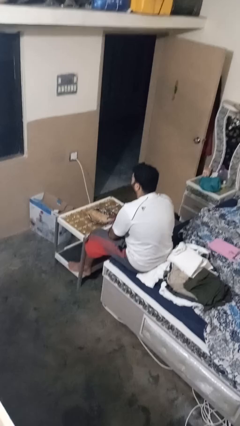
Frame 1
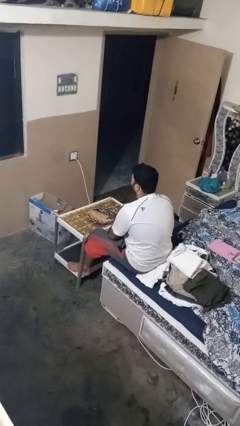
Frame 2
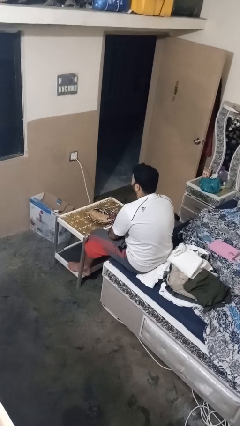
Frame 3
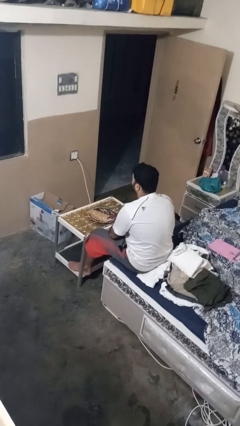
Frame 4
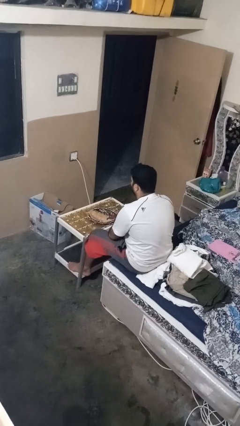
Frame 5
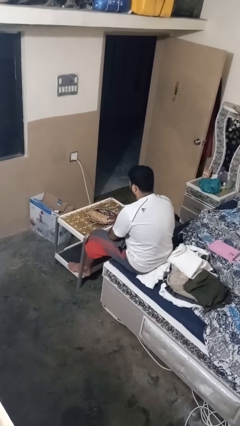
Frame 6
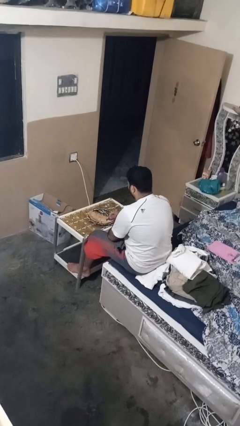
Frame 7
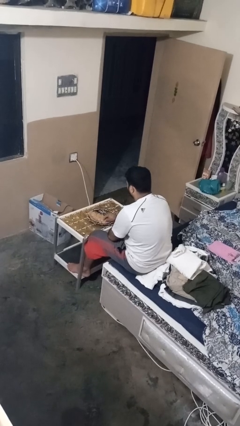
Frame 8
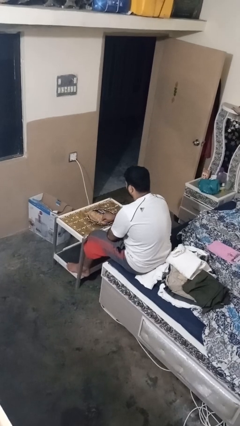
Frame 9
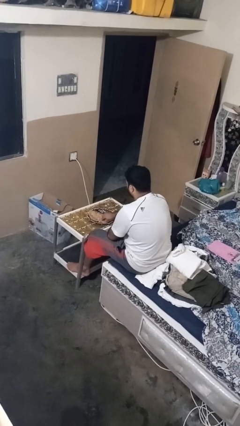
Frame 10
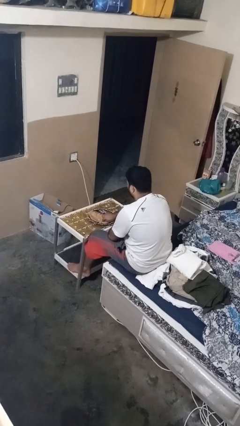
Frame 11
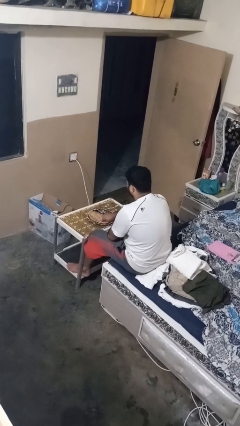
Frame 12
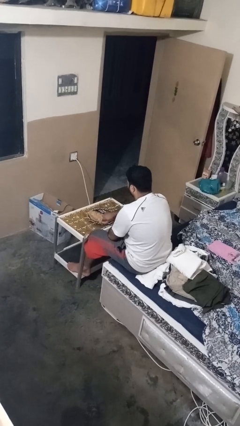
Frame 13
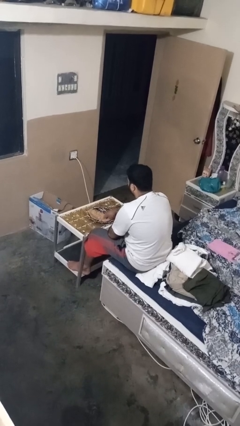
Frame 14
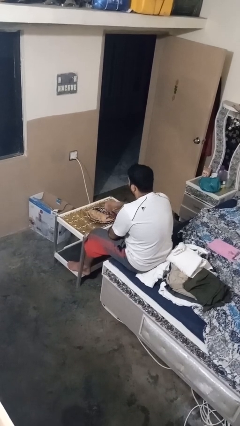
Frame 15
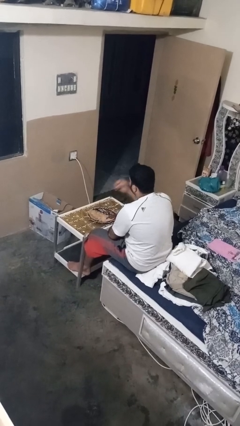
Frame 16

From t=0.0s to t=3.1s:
person eats with hands

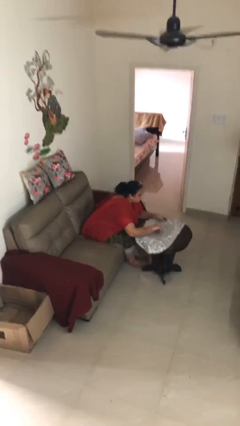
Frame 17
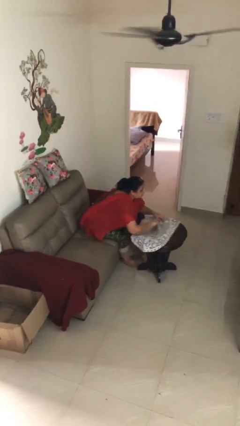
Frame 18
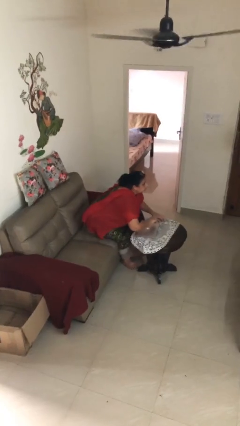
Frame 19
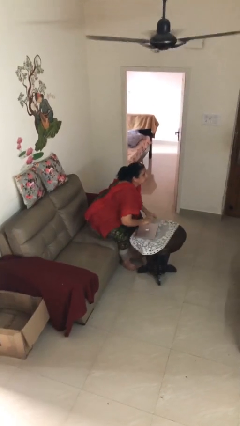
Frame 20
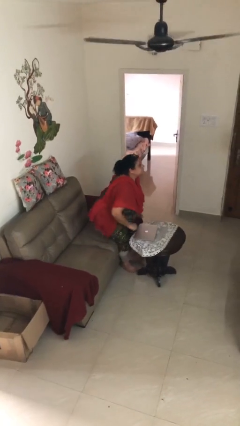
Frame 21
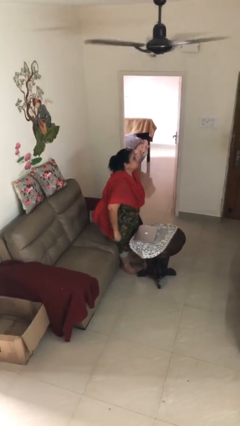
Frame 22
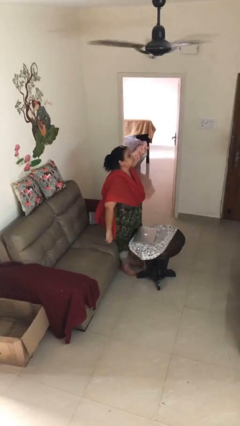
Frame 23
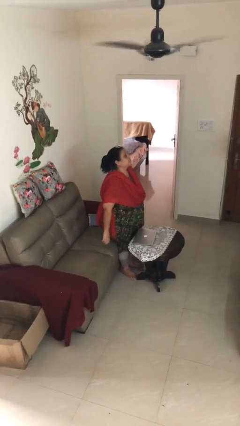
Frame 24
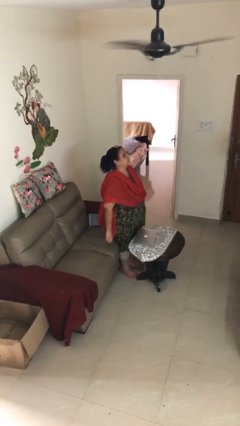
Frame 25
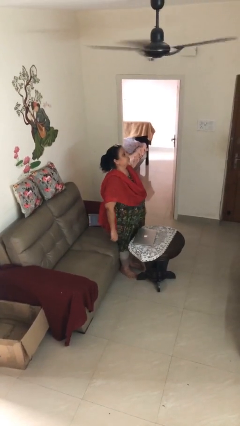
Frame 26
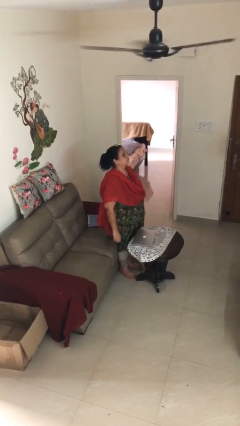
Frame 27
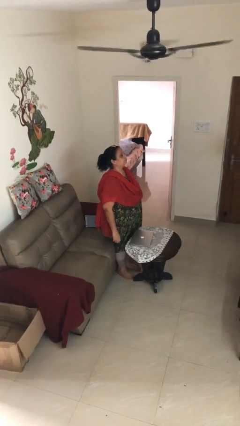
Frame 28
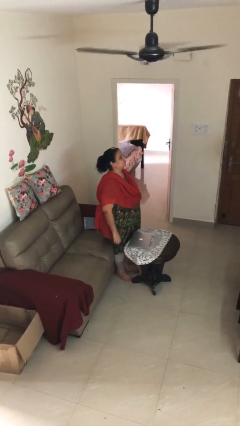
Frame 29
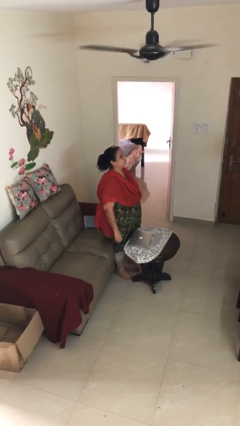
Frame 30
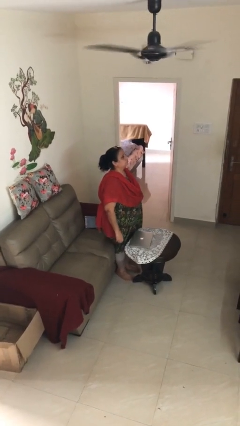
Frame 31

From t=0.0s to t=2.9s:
person stands up

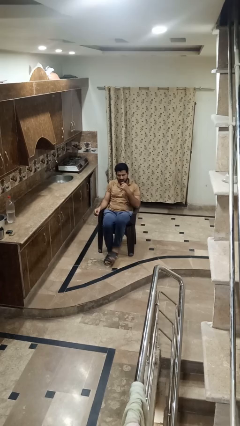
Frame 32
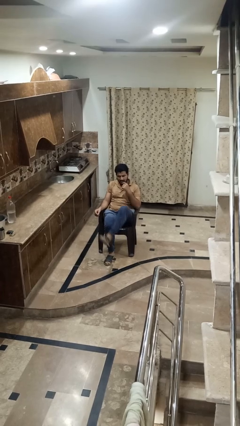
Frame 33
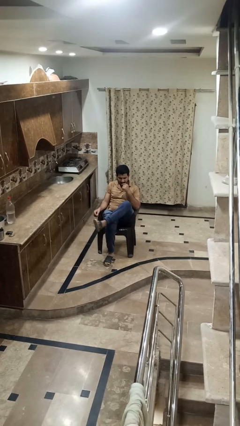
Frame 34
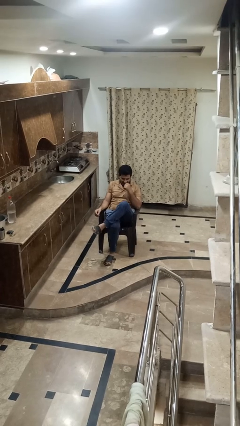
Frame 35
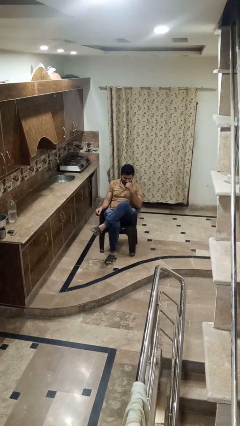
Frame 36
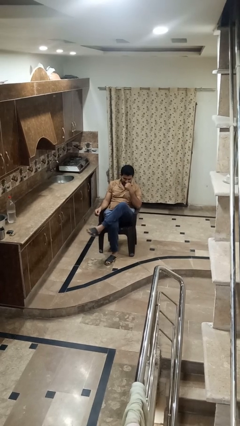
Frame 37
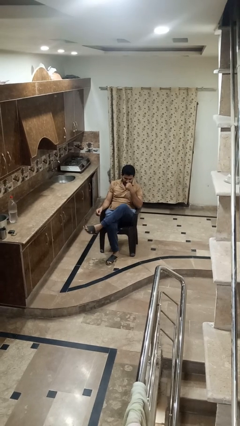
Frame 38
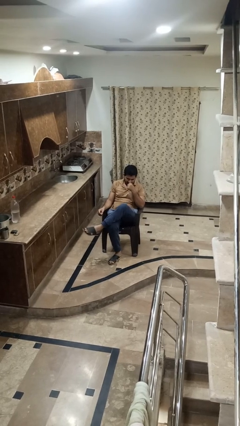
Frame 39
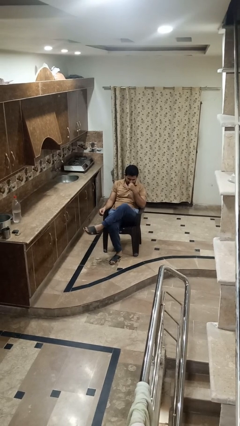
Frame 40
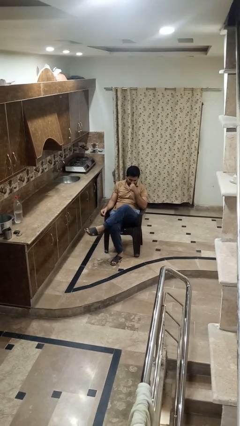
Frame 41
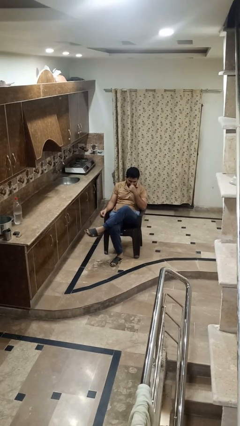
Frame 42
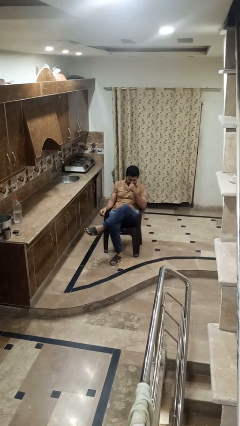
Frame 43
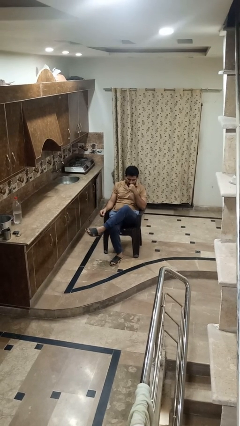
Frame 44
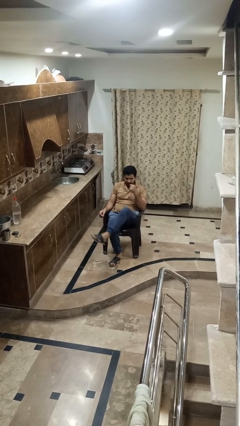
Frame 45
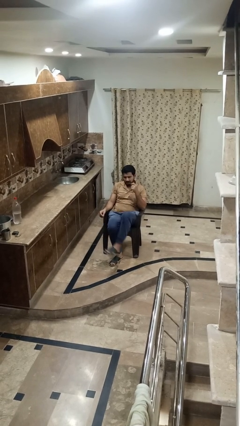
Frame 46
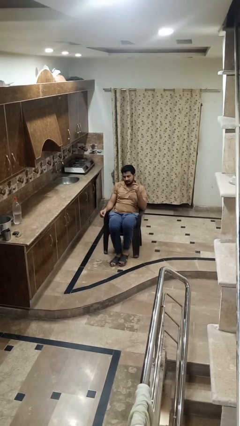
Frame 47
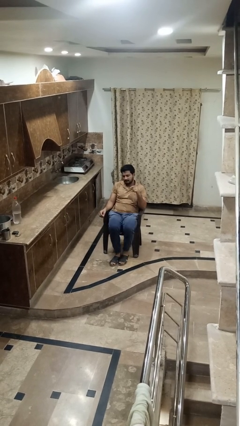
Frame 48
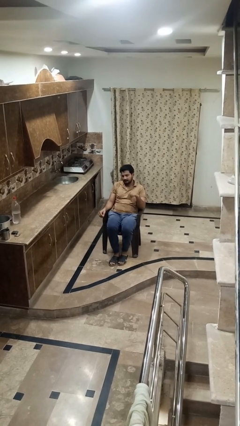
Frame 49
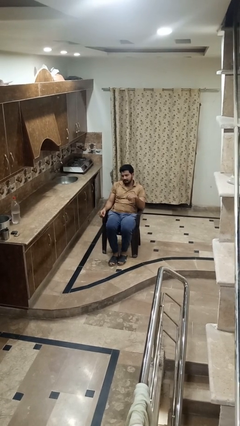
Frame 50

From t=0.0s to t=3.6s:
person crosses legs

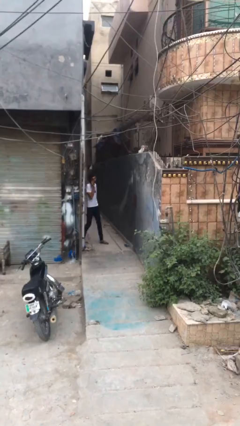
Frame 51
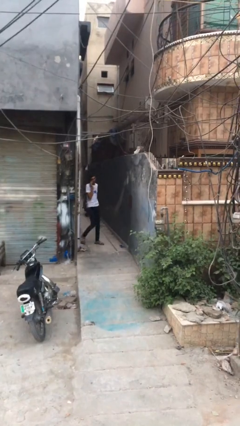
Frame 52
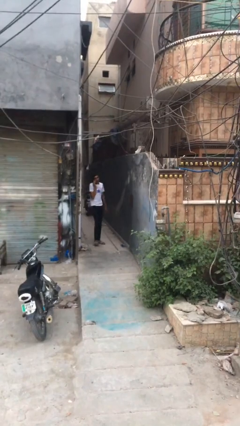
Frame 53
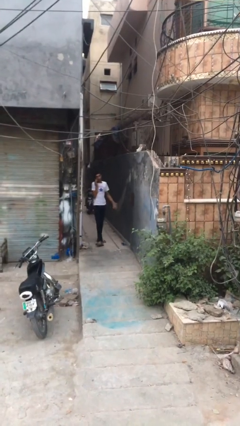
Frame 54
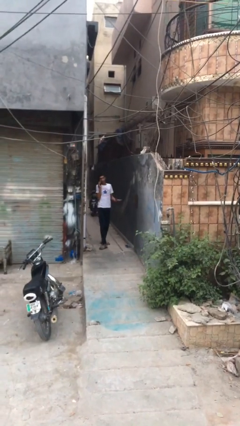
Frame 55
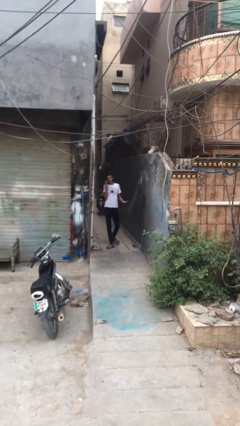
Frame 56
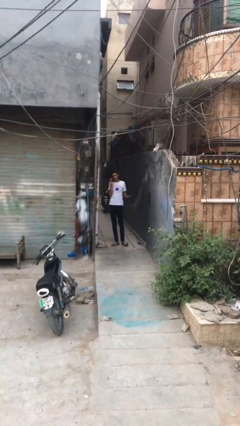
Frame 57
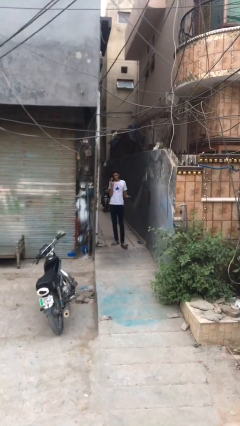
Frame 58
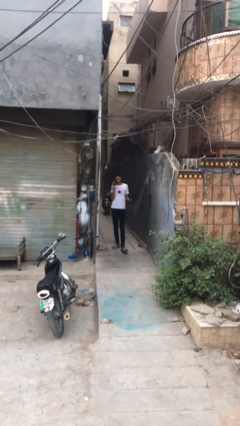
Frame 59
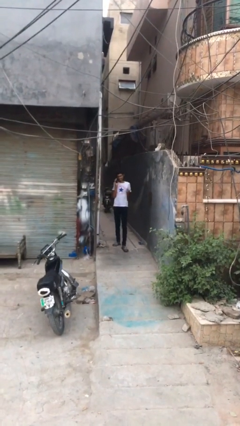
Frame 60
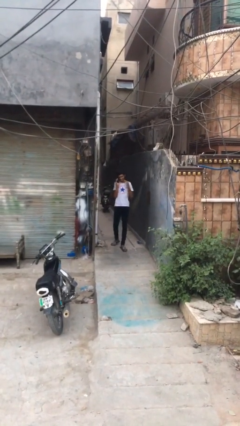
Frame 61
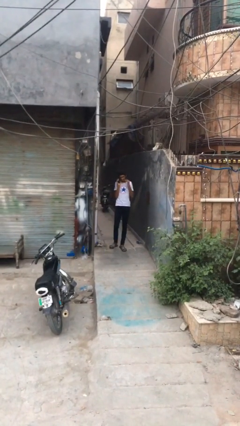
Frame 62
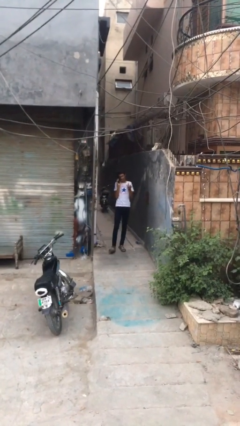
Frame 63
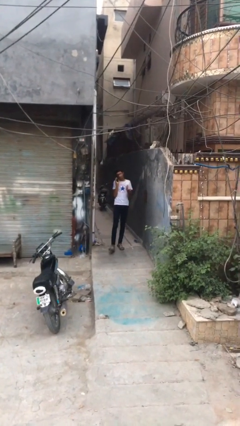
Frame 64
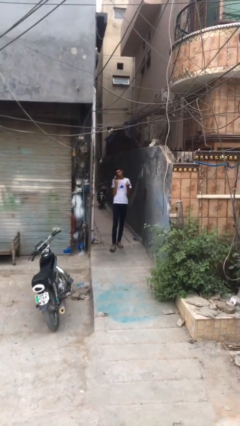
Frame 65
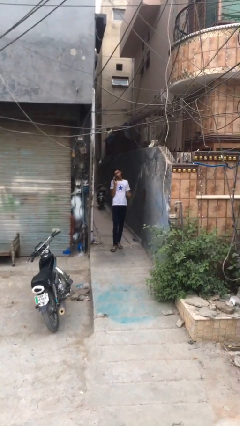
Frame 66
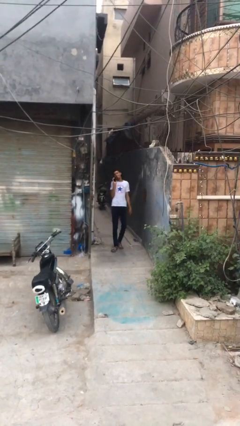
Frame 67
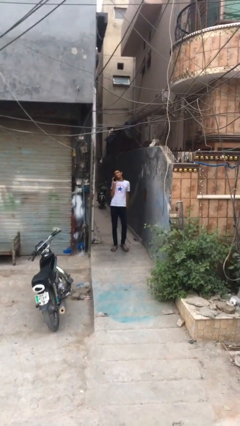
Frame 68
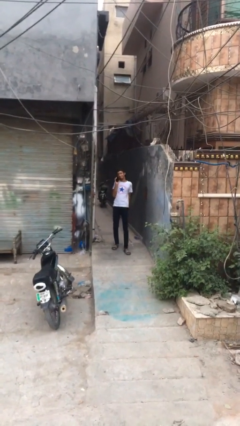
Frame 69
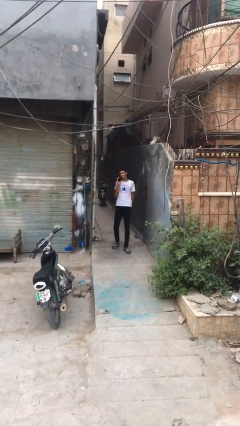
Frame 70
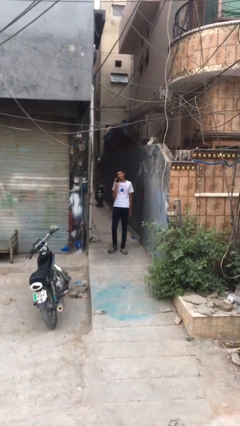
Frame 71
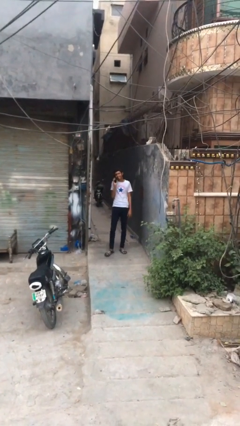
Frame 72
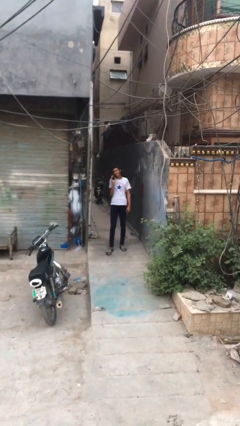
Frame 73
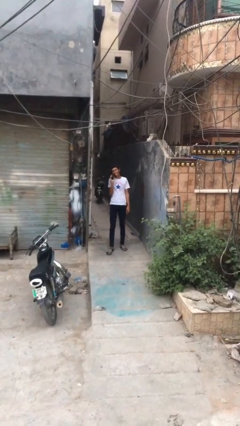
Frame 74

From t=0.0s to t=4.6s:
person enters scene through structure

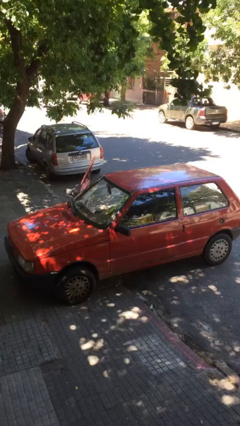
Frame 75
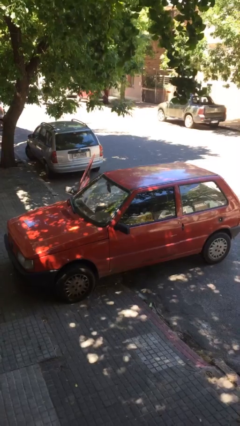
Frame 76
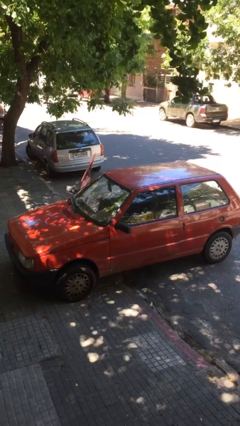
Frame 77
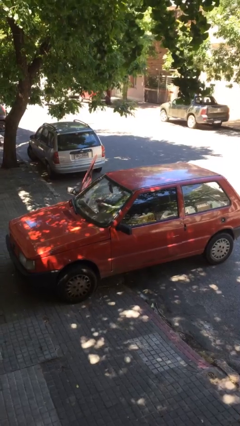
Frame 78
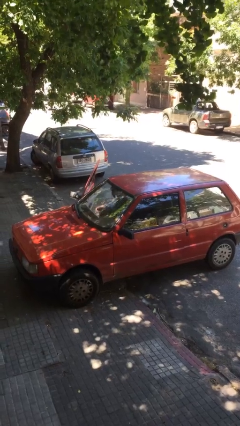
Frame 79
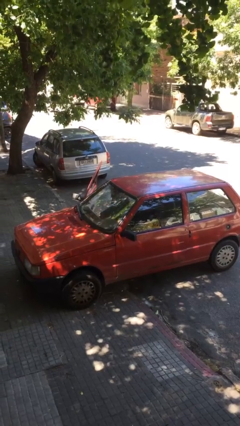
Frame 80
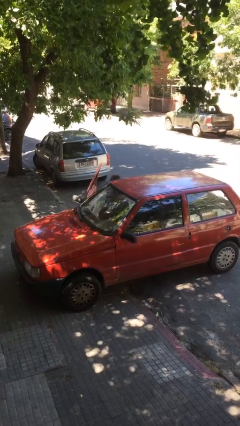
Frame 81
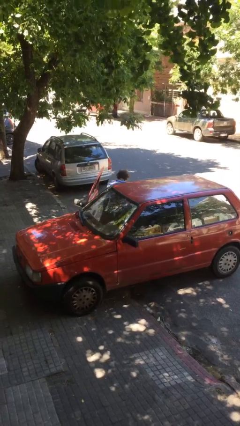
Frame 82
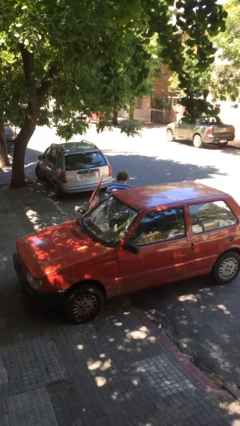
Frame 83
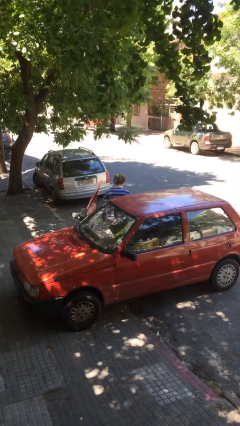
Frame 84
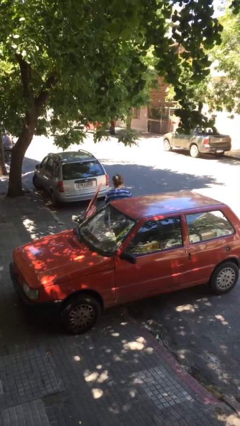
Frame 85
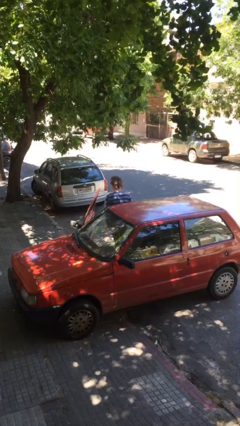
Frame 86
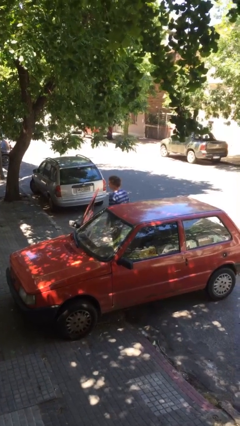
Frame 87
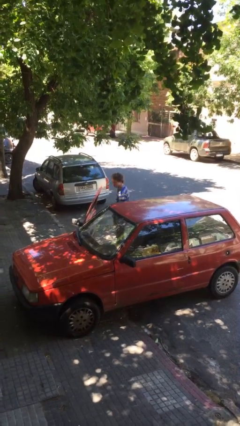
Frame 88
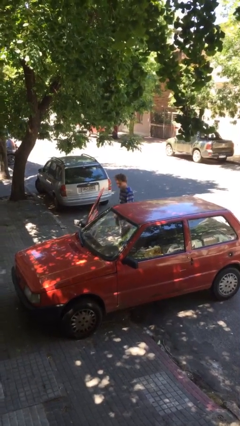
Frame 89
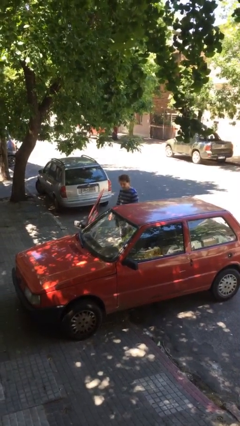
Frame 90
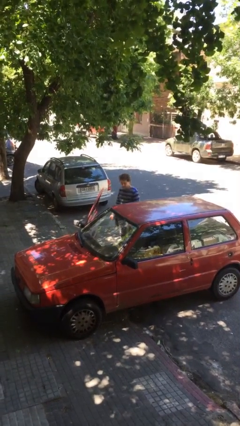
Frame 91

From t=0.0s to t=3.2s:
person exits car

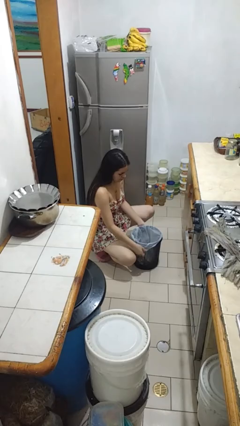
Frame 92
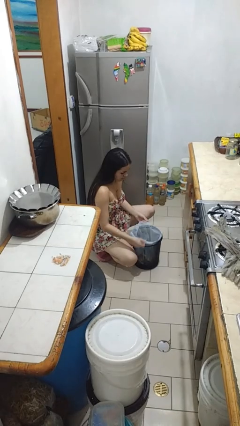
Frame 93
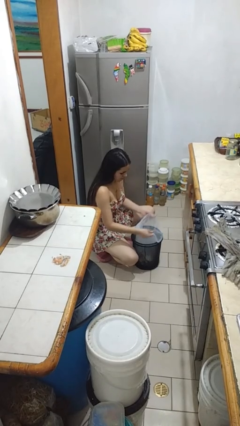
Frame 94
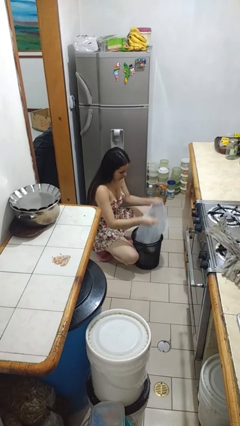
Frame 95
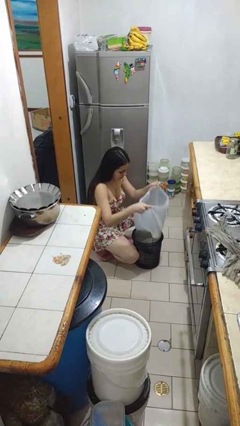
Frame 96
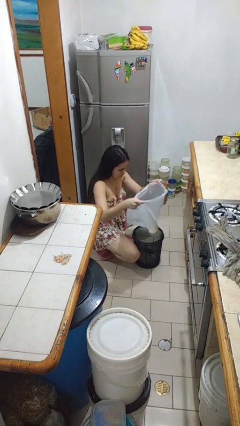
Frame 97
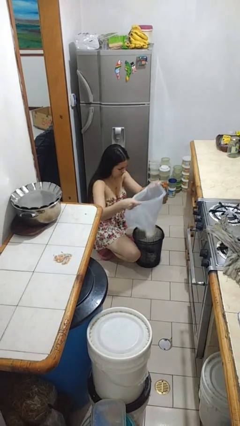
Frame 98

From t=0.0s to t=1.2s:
person removes trashbag from trashcan
